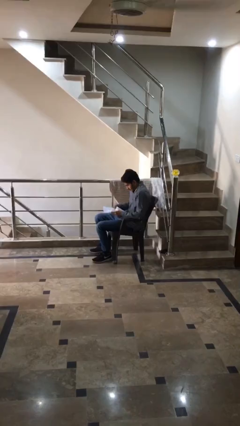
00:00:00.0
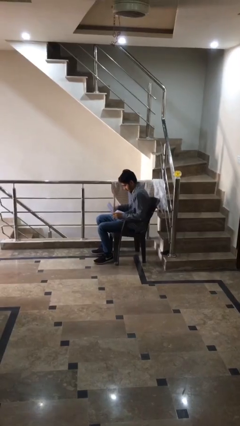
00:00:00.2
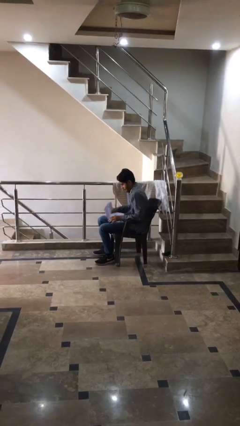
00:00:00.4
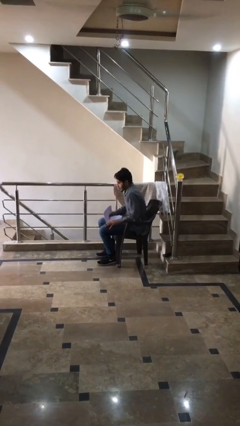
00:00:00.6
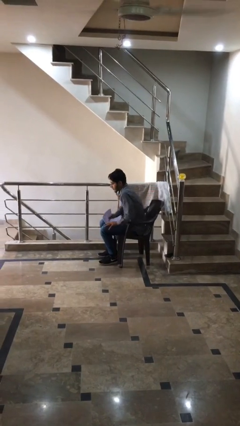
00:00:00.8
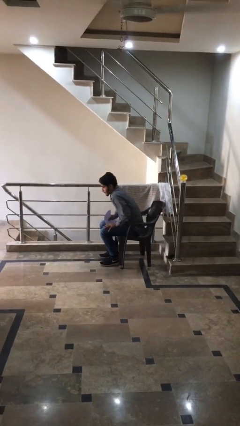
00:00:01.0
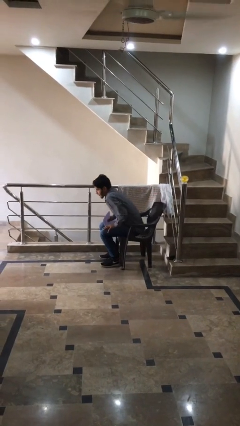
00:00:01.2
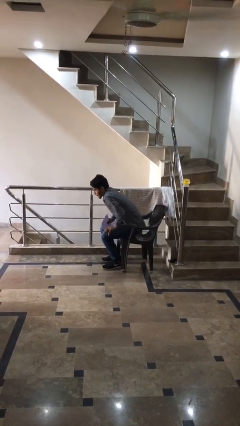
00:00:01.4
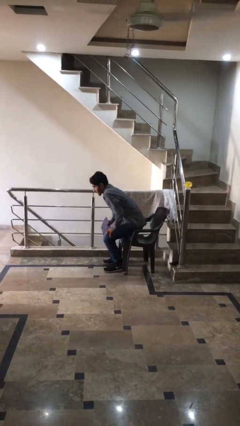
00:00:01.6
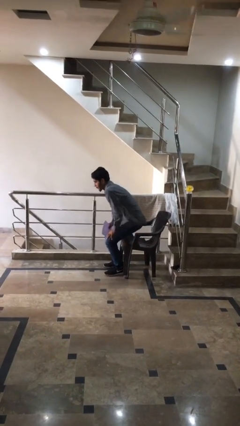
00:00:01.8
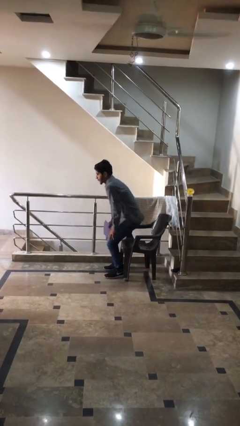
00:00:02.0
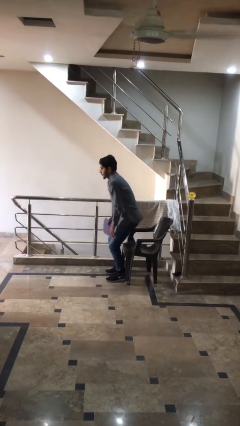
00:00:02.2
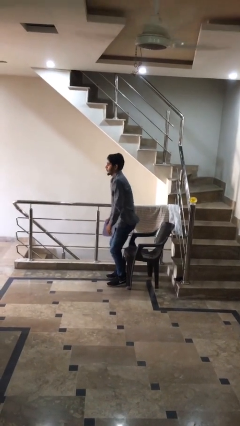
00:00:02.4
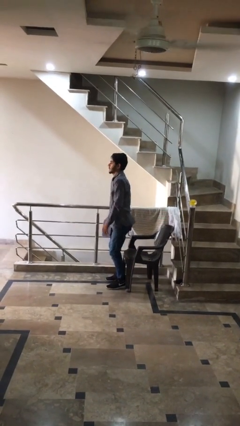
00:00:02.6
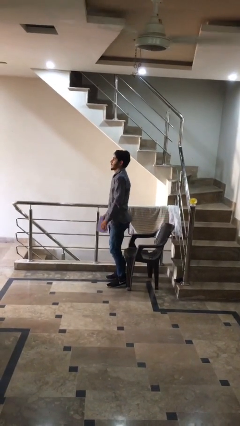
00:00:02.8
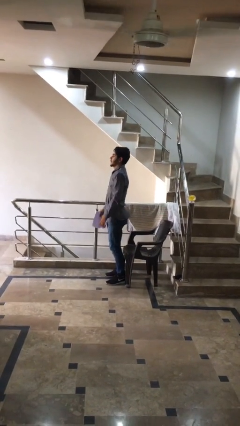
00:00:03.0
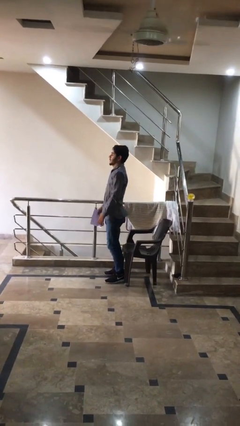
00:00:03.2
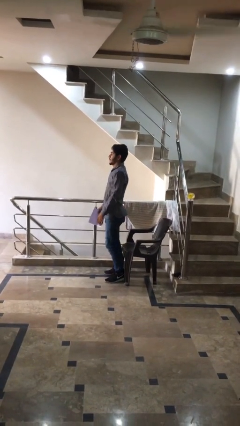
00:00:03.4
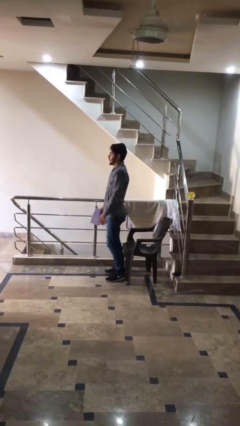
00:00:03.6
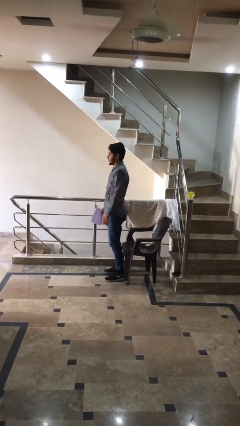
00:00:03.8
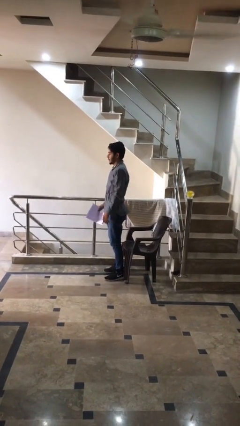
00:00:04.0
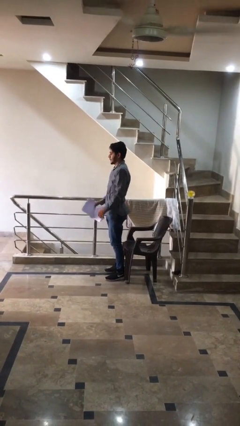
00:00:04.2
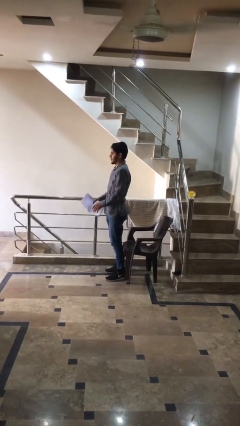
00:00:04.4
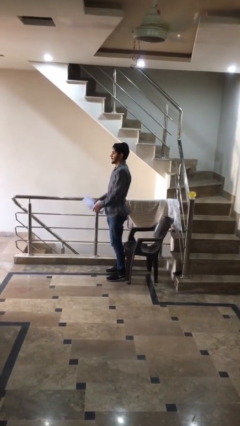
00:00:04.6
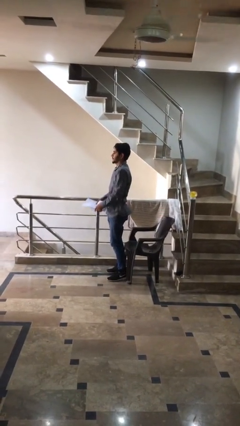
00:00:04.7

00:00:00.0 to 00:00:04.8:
person stands up

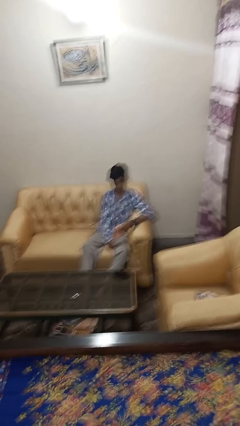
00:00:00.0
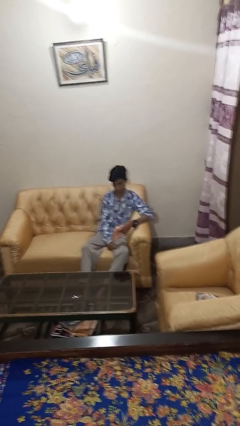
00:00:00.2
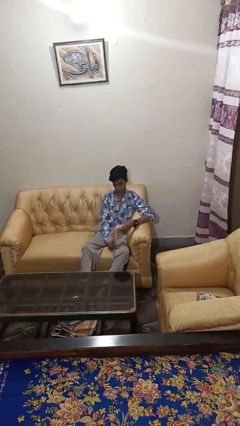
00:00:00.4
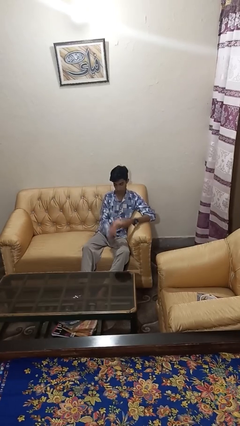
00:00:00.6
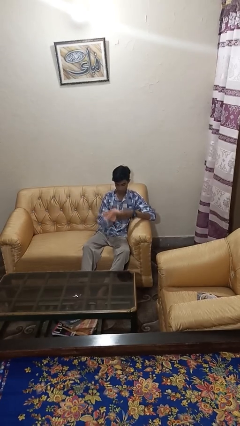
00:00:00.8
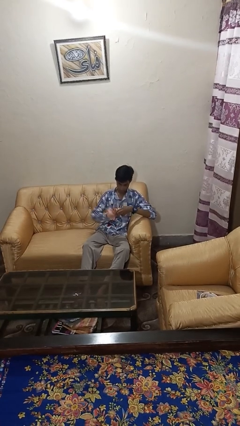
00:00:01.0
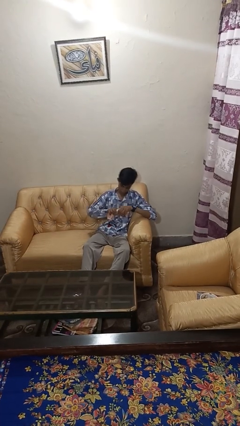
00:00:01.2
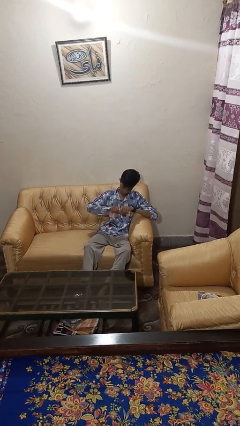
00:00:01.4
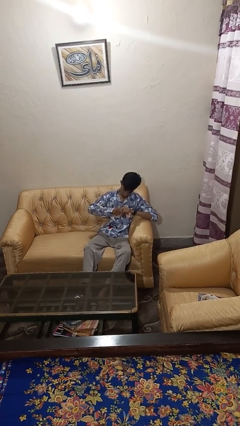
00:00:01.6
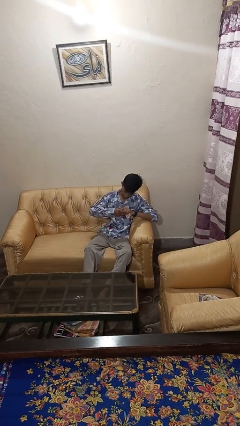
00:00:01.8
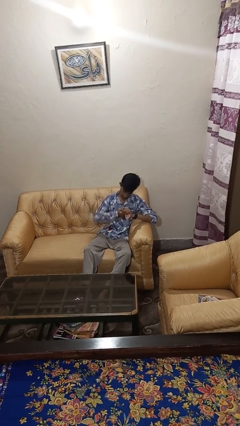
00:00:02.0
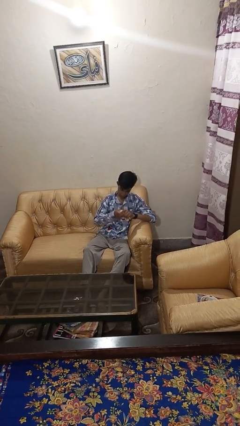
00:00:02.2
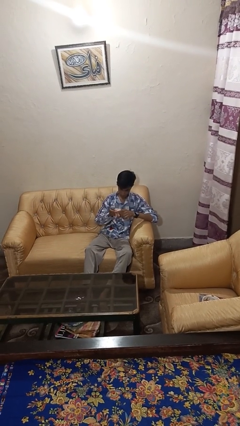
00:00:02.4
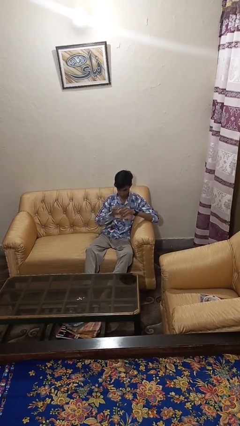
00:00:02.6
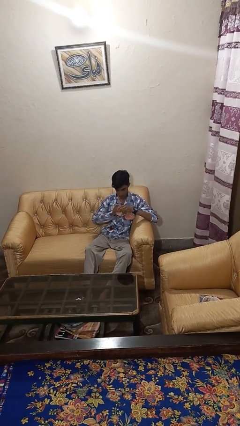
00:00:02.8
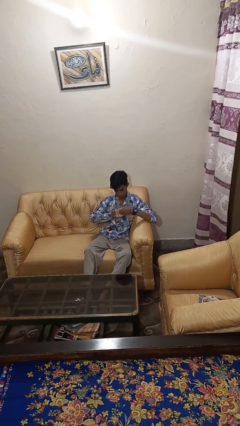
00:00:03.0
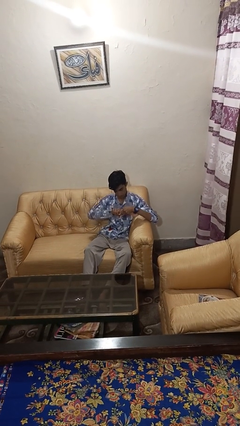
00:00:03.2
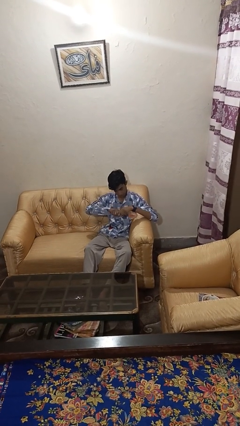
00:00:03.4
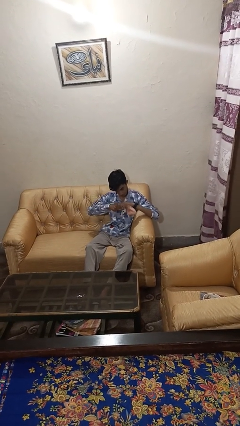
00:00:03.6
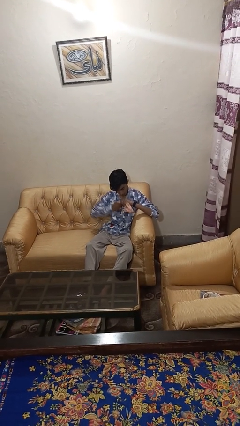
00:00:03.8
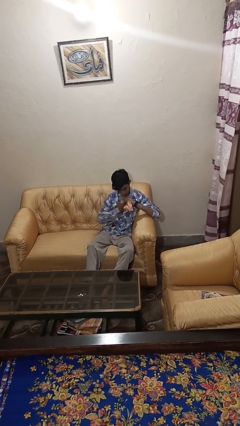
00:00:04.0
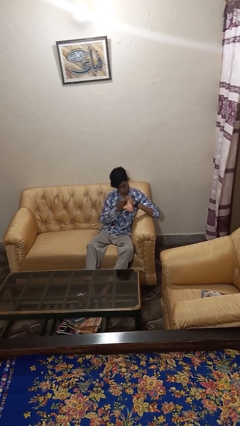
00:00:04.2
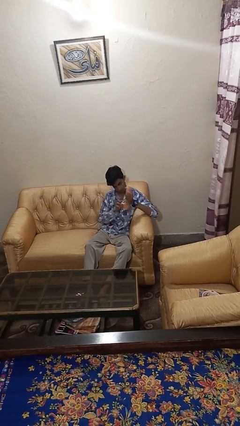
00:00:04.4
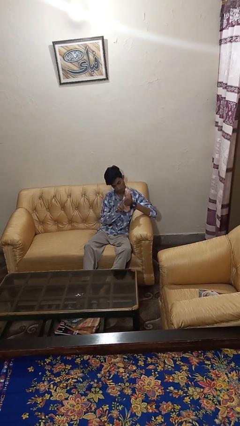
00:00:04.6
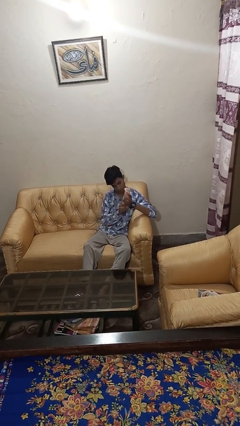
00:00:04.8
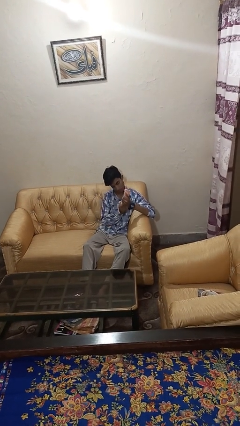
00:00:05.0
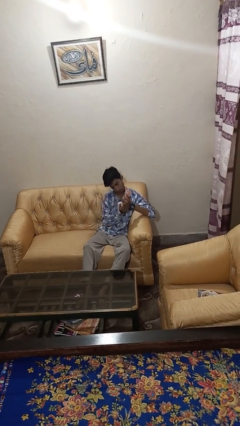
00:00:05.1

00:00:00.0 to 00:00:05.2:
person squeezes object

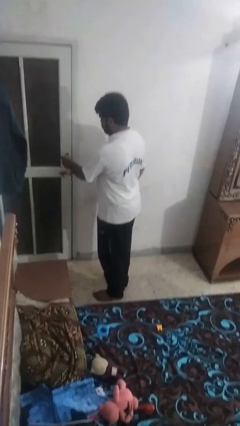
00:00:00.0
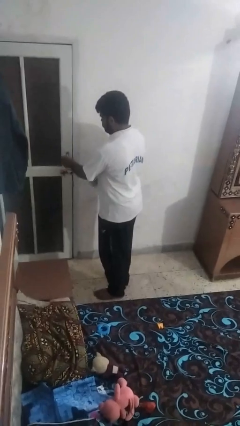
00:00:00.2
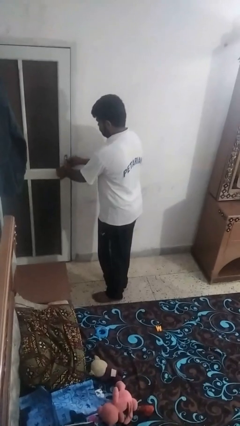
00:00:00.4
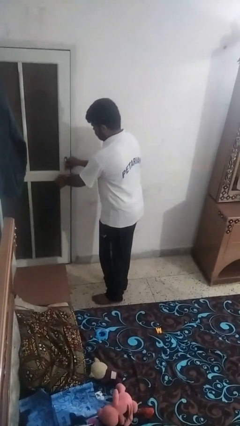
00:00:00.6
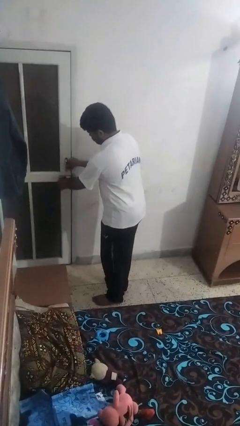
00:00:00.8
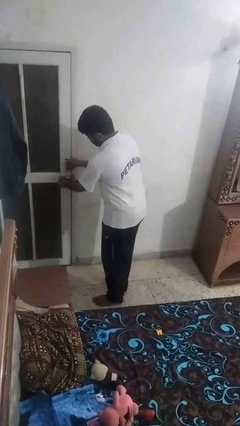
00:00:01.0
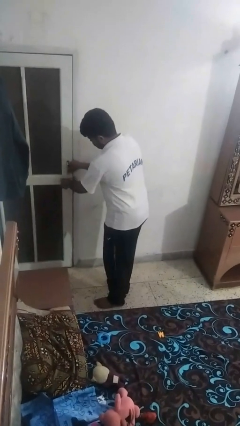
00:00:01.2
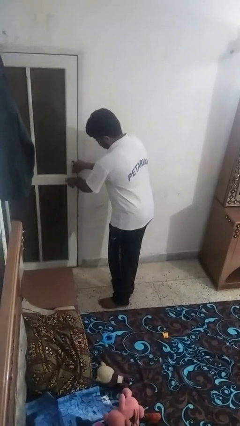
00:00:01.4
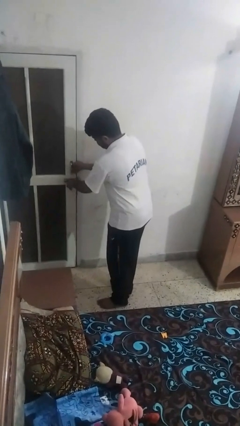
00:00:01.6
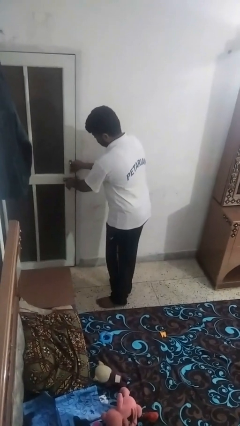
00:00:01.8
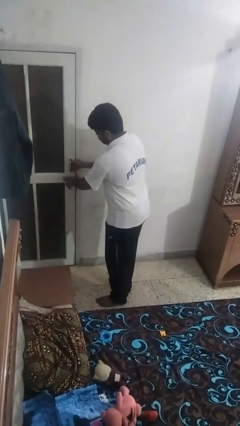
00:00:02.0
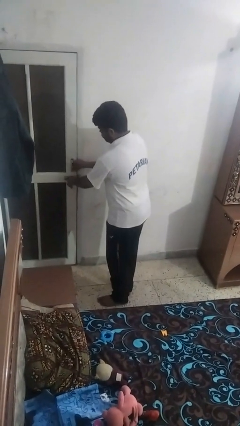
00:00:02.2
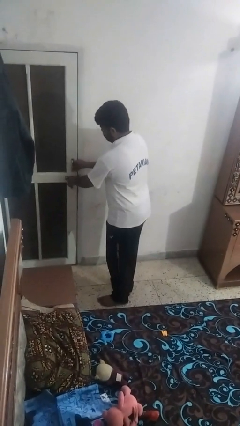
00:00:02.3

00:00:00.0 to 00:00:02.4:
person locks door with keys

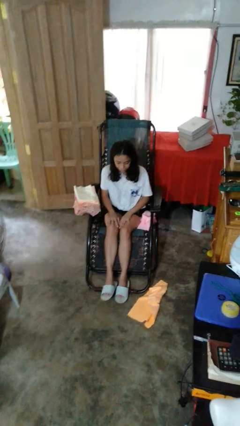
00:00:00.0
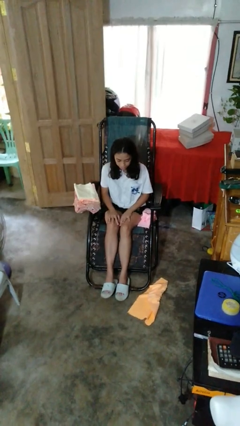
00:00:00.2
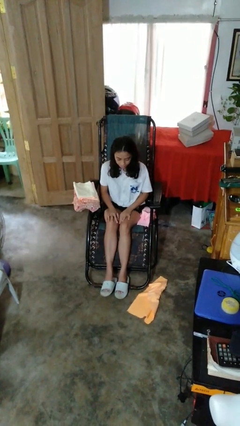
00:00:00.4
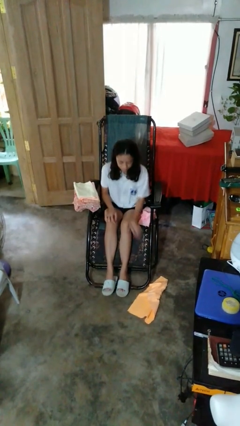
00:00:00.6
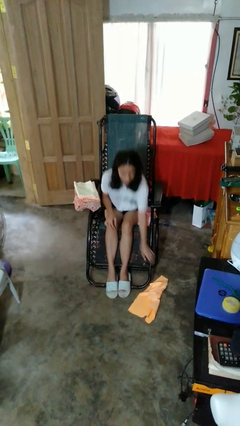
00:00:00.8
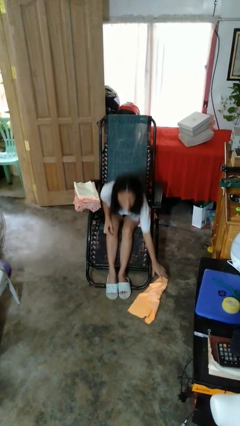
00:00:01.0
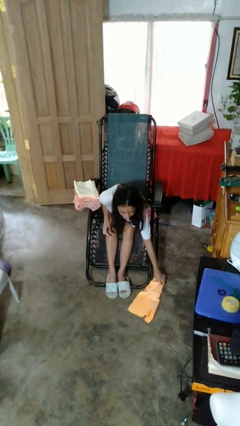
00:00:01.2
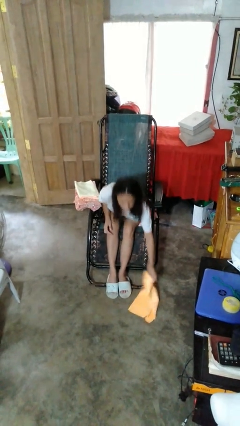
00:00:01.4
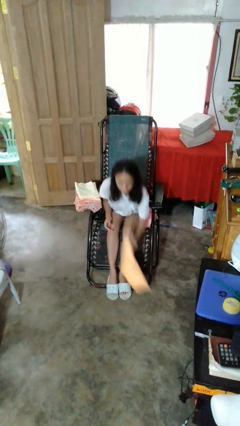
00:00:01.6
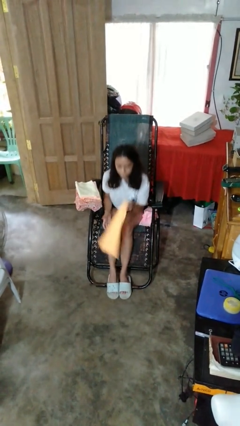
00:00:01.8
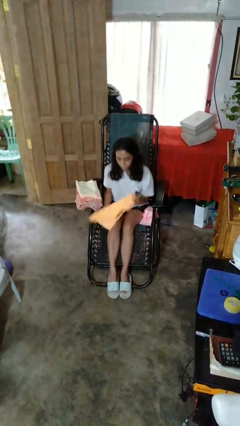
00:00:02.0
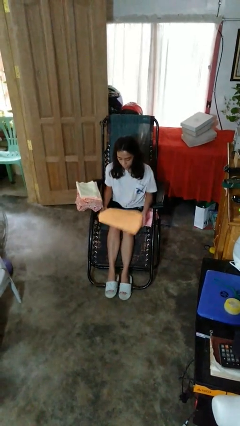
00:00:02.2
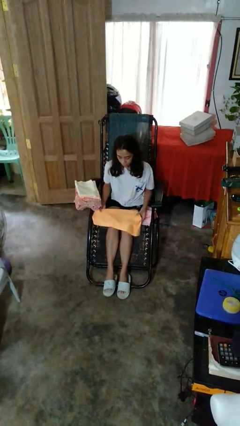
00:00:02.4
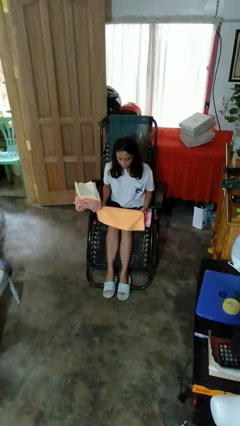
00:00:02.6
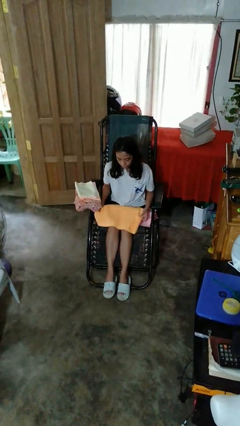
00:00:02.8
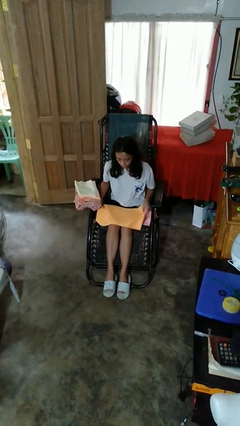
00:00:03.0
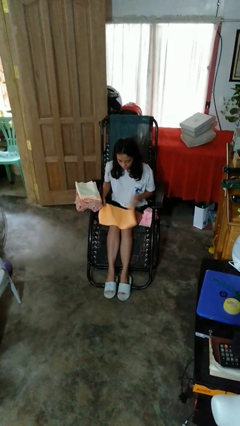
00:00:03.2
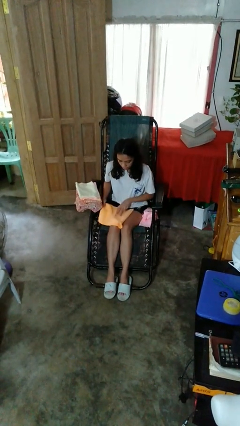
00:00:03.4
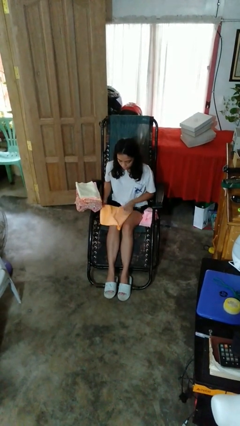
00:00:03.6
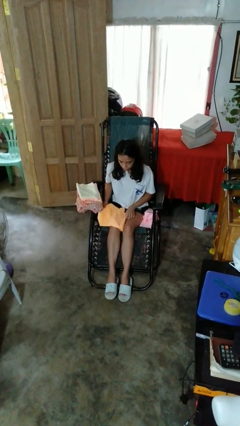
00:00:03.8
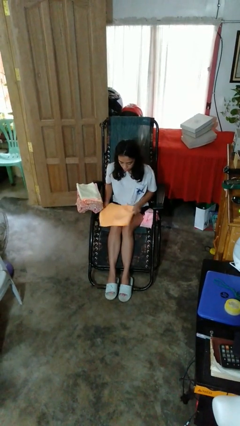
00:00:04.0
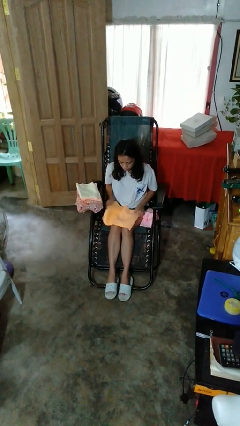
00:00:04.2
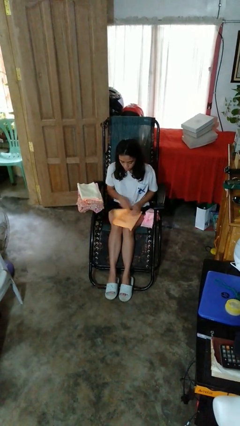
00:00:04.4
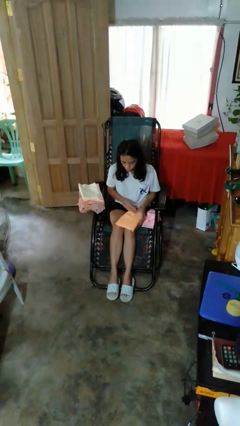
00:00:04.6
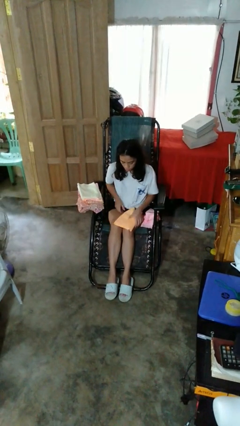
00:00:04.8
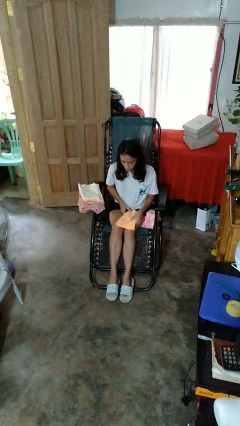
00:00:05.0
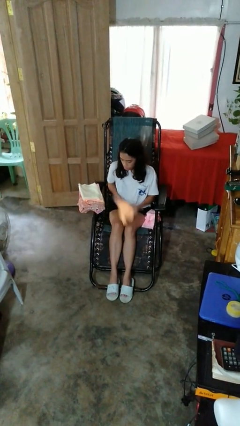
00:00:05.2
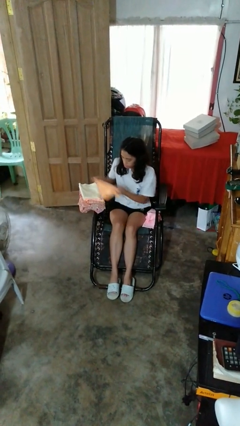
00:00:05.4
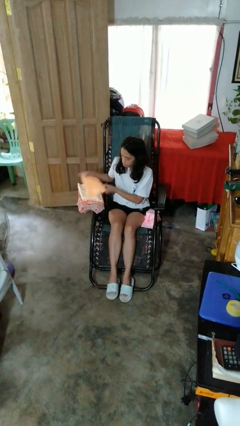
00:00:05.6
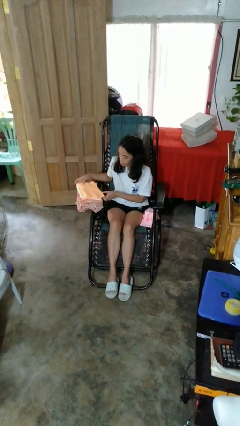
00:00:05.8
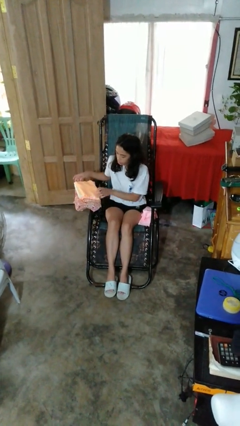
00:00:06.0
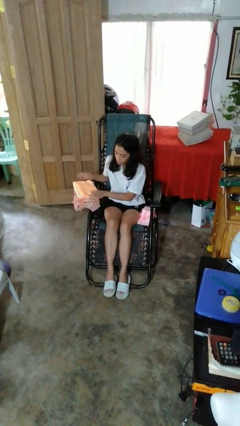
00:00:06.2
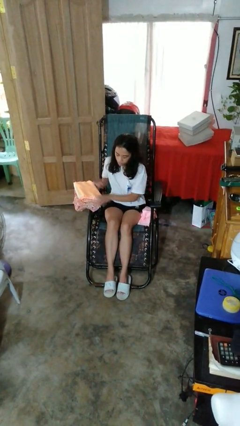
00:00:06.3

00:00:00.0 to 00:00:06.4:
person folds towel
